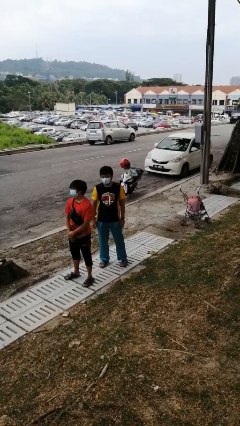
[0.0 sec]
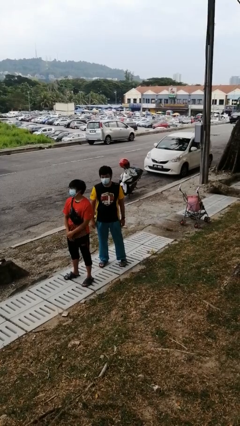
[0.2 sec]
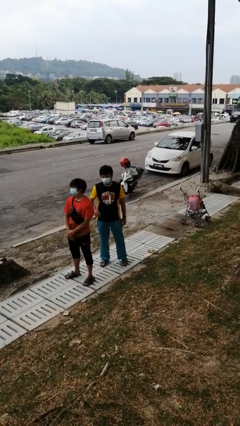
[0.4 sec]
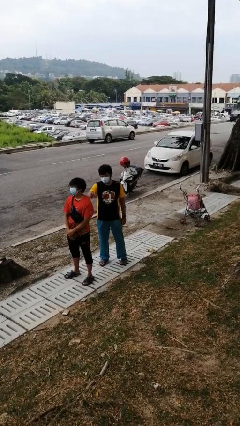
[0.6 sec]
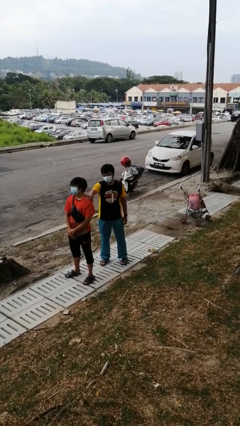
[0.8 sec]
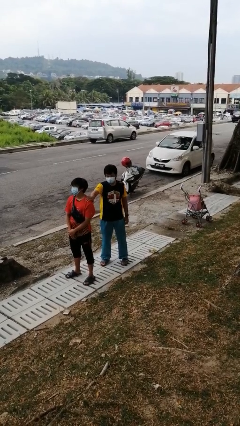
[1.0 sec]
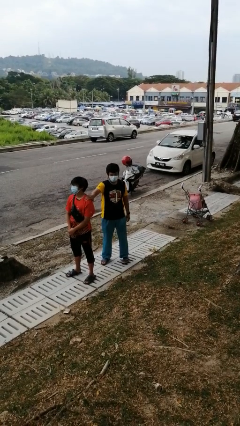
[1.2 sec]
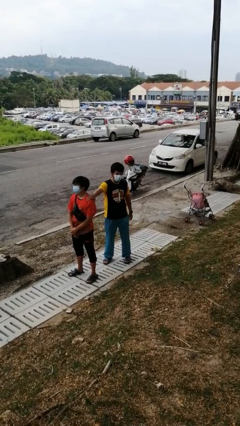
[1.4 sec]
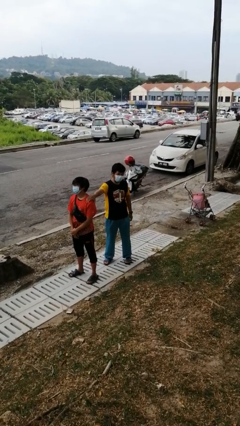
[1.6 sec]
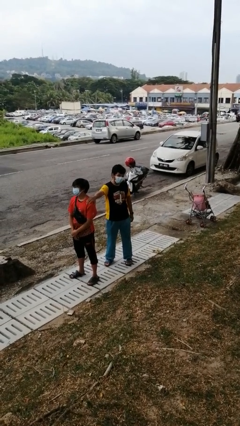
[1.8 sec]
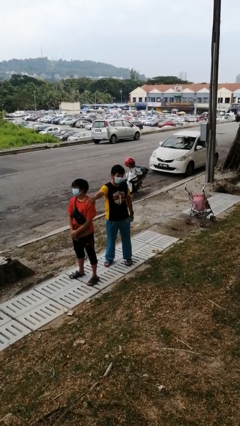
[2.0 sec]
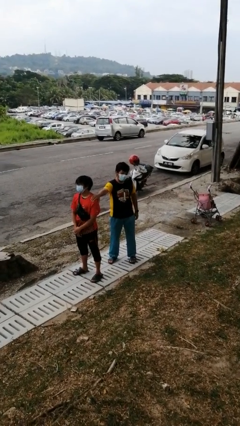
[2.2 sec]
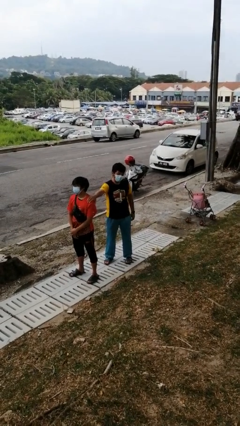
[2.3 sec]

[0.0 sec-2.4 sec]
person grabs person by shoulder

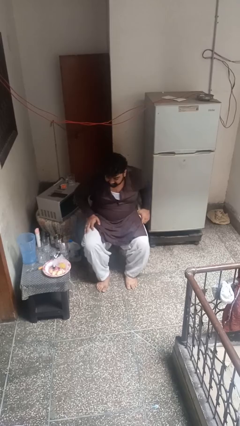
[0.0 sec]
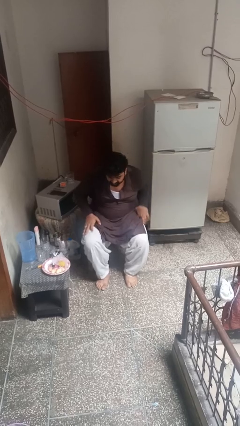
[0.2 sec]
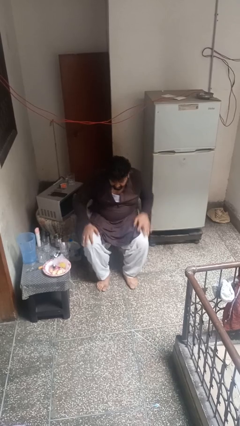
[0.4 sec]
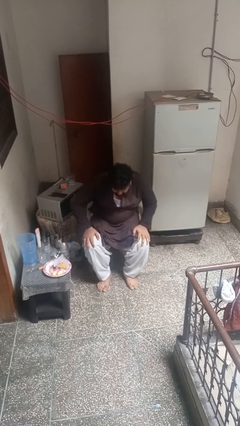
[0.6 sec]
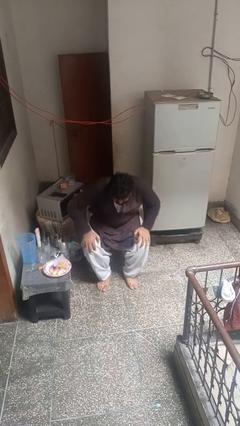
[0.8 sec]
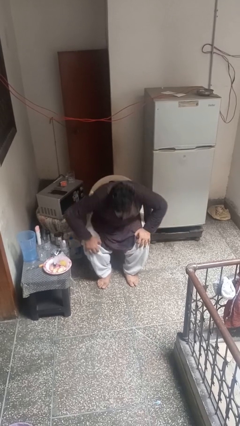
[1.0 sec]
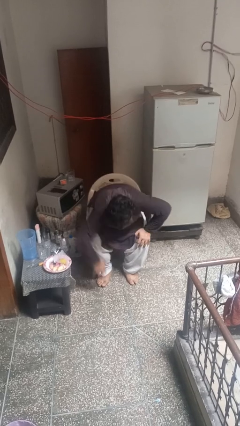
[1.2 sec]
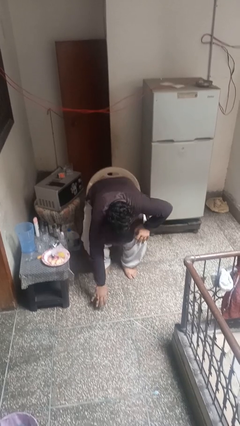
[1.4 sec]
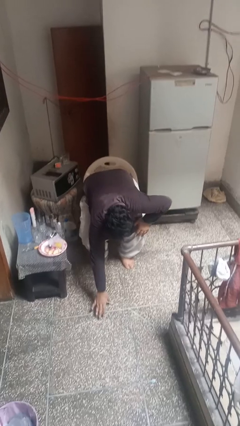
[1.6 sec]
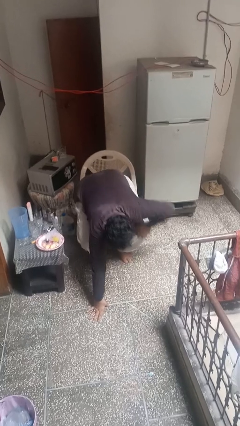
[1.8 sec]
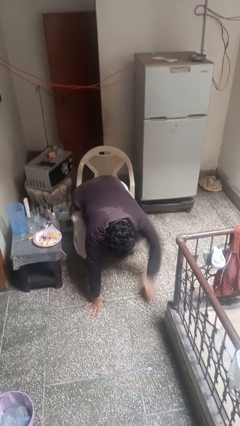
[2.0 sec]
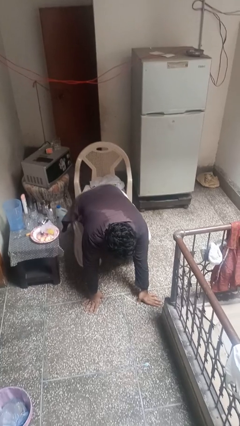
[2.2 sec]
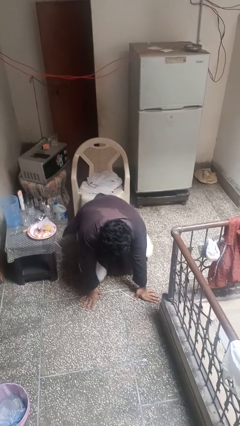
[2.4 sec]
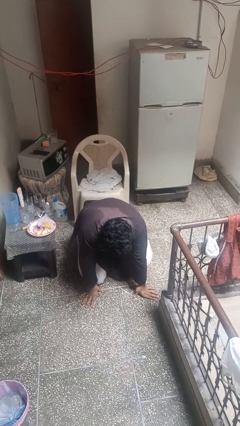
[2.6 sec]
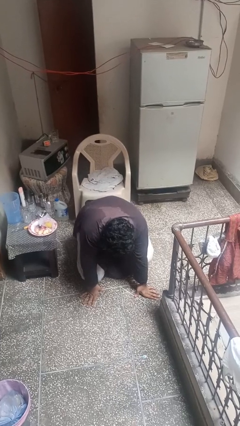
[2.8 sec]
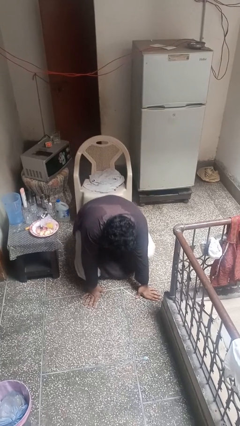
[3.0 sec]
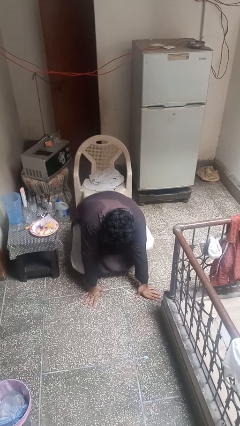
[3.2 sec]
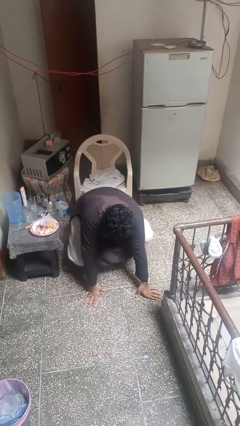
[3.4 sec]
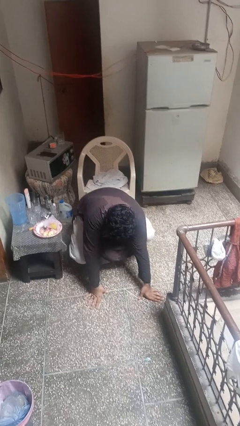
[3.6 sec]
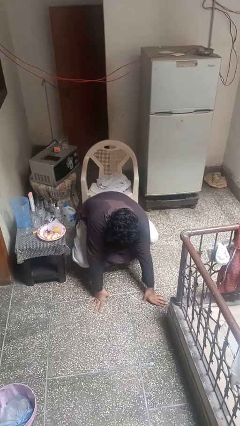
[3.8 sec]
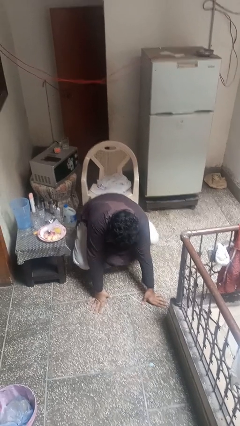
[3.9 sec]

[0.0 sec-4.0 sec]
person falls from chair

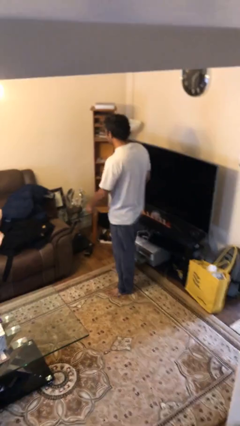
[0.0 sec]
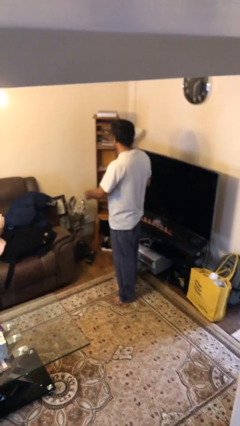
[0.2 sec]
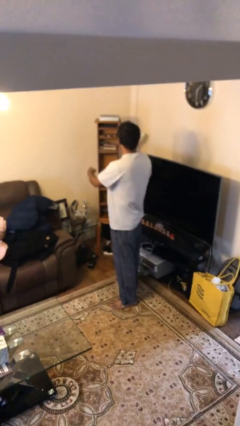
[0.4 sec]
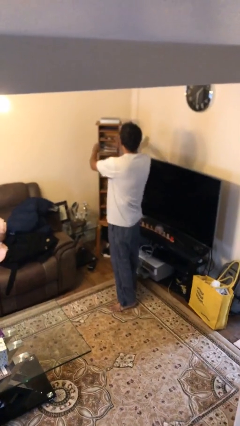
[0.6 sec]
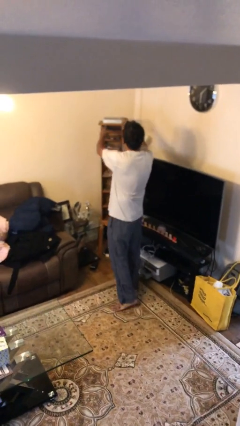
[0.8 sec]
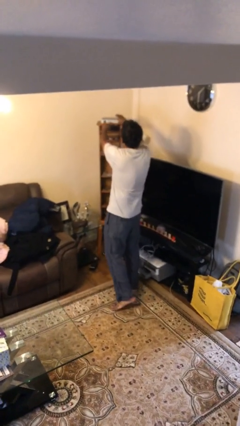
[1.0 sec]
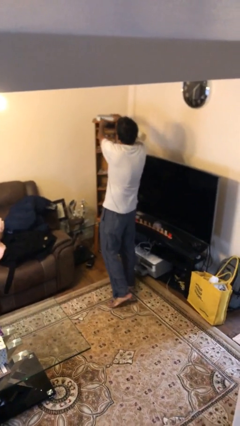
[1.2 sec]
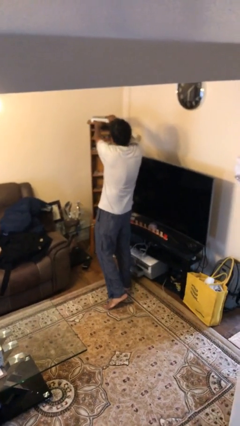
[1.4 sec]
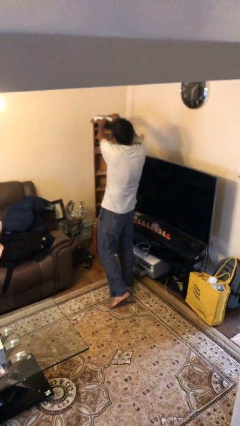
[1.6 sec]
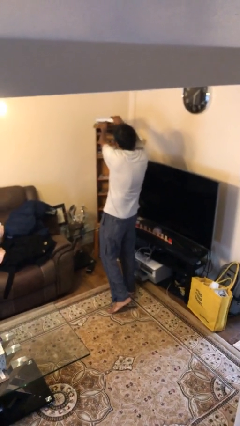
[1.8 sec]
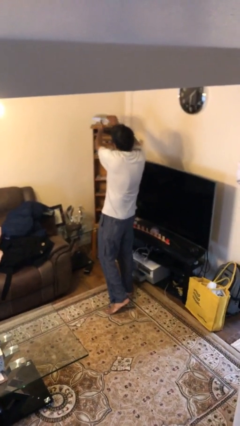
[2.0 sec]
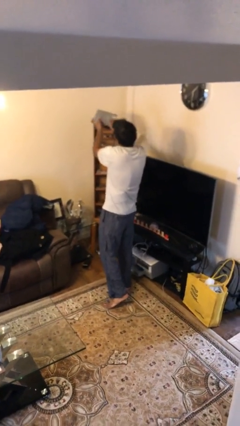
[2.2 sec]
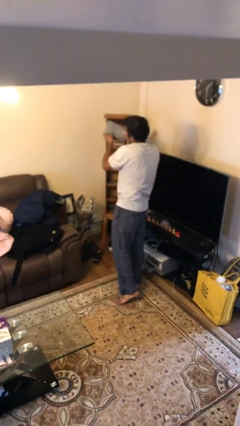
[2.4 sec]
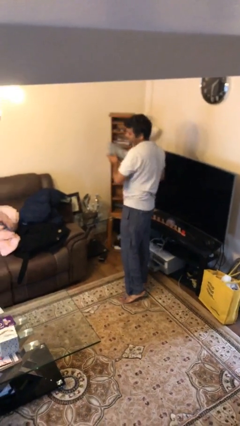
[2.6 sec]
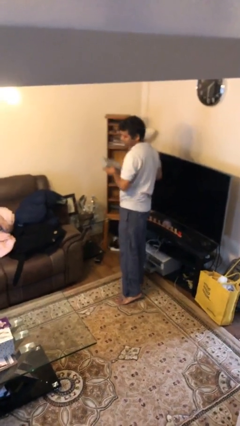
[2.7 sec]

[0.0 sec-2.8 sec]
person picks up object from shelf

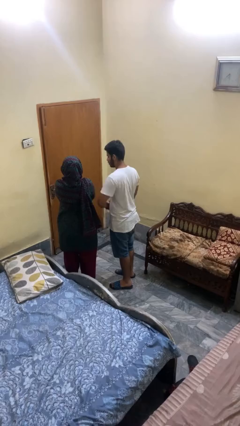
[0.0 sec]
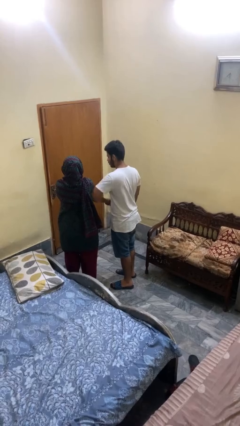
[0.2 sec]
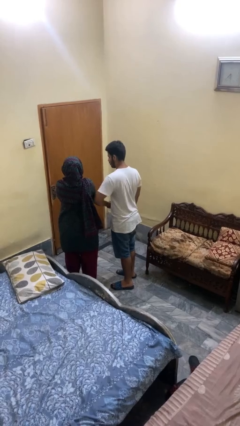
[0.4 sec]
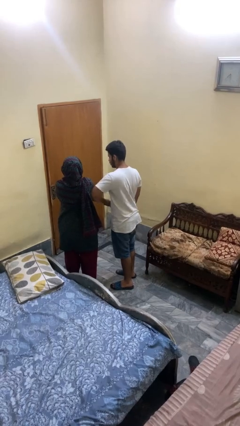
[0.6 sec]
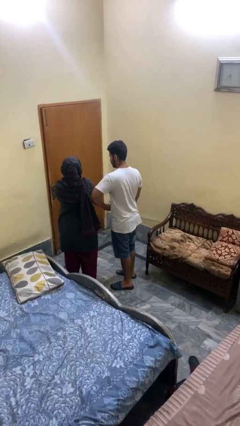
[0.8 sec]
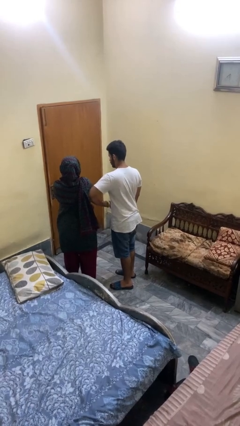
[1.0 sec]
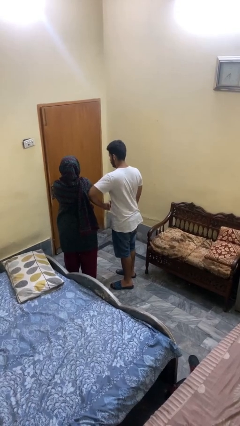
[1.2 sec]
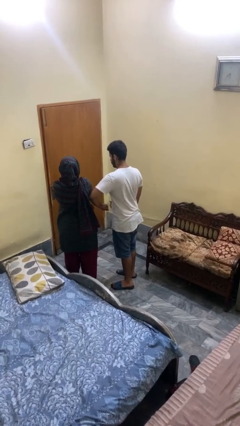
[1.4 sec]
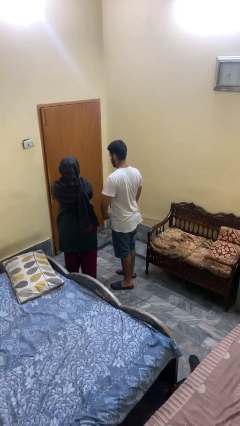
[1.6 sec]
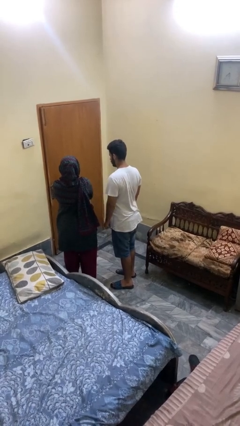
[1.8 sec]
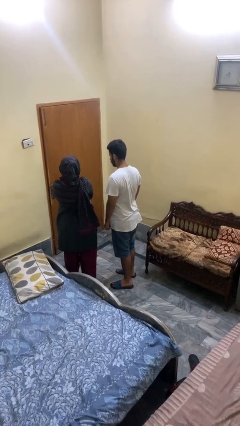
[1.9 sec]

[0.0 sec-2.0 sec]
person nudges person with elbow

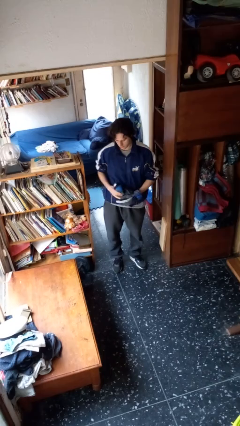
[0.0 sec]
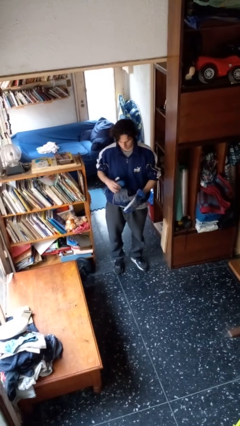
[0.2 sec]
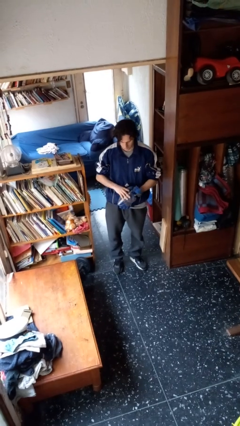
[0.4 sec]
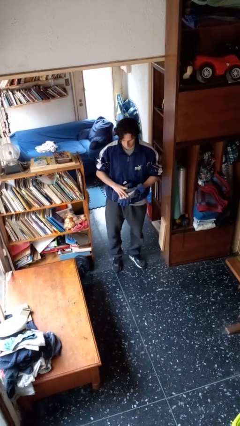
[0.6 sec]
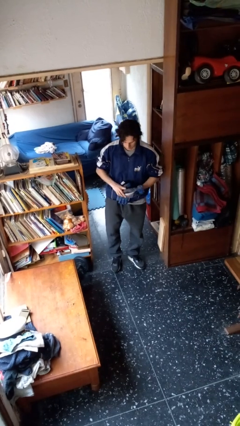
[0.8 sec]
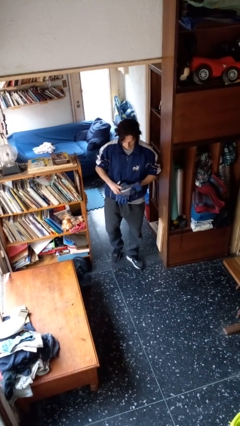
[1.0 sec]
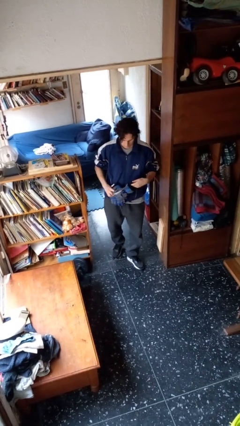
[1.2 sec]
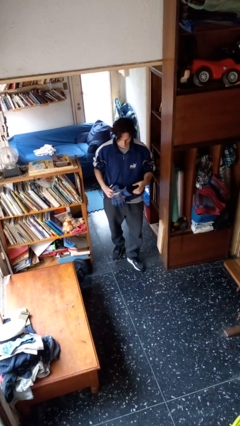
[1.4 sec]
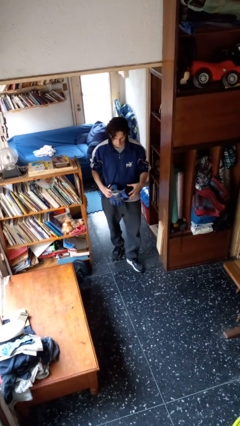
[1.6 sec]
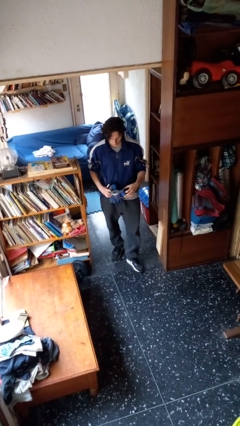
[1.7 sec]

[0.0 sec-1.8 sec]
person takes off gloves

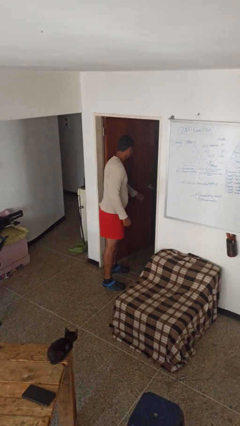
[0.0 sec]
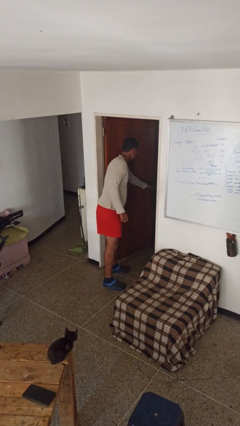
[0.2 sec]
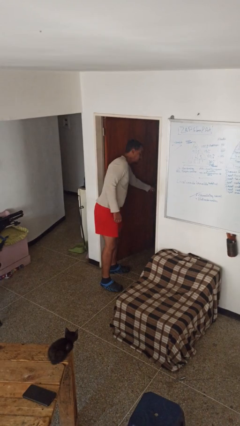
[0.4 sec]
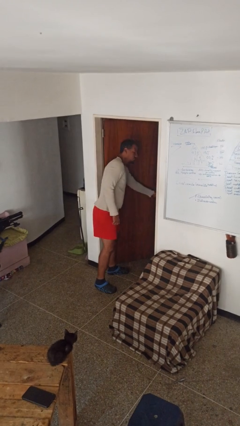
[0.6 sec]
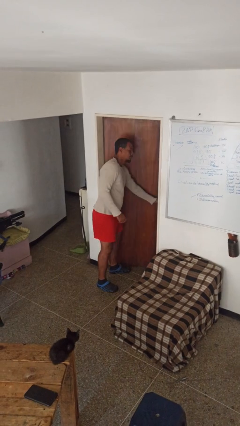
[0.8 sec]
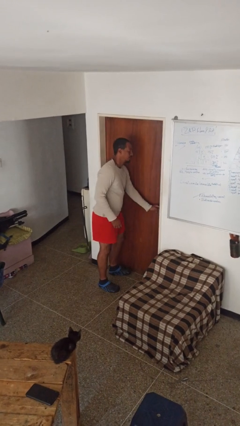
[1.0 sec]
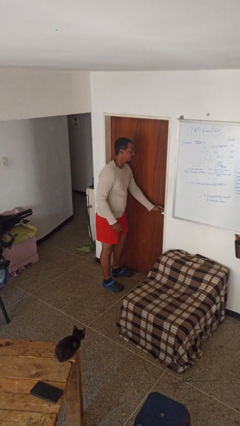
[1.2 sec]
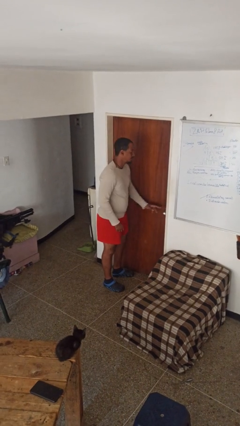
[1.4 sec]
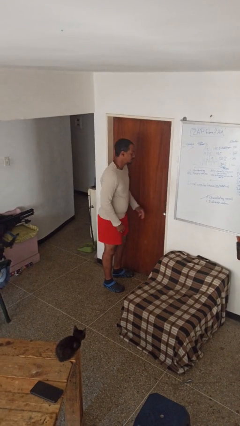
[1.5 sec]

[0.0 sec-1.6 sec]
person closes facility door

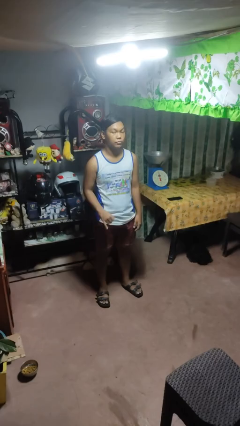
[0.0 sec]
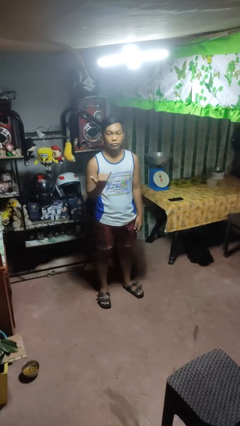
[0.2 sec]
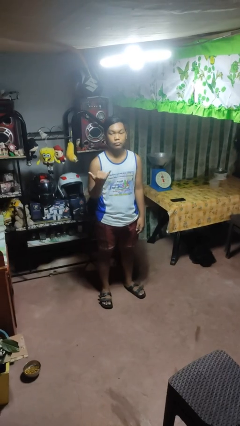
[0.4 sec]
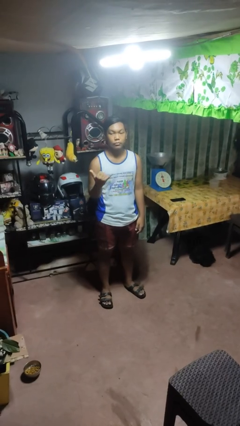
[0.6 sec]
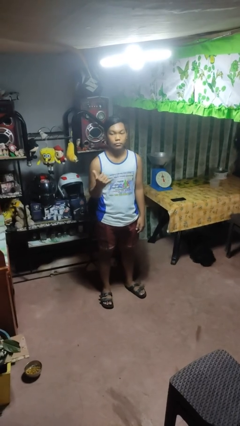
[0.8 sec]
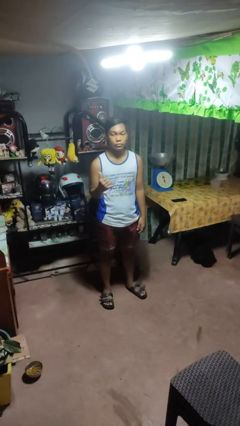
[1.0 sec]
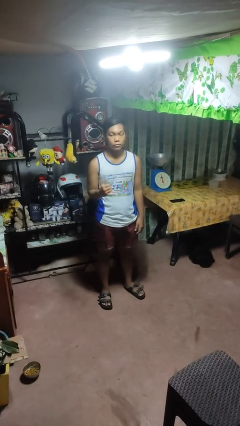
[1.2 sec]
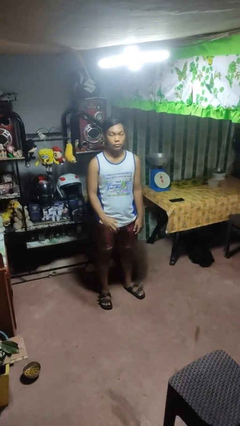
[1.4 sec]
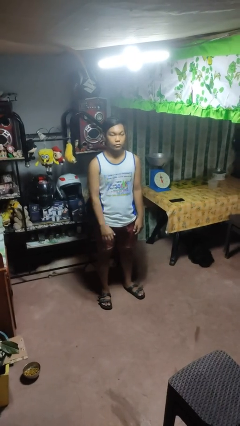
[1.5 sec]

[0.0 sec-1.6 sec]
person gestures hang loose

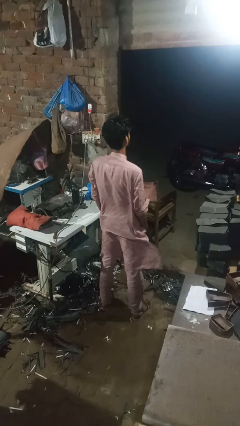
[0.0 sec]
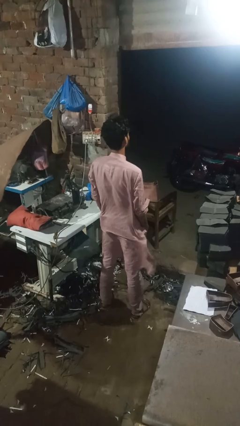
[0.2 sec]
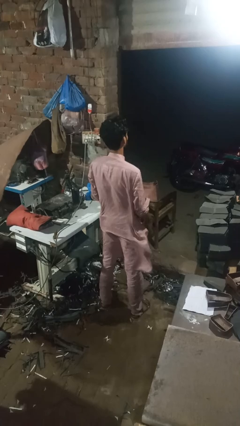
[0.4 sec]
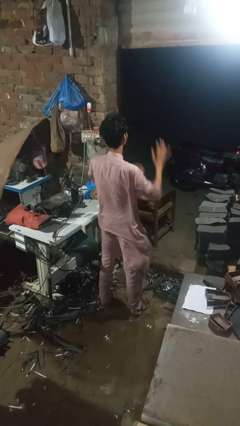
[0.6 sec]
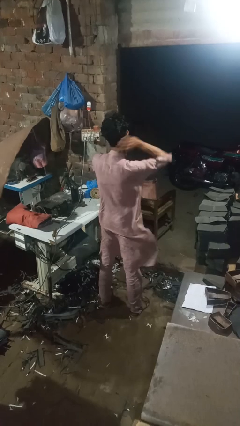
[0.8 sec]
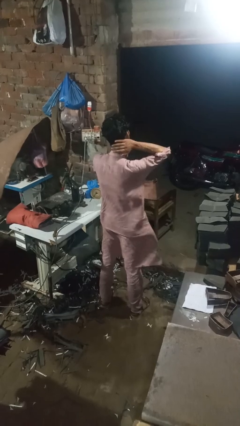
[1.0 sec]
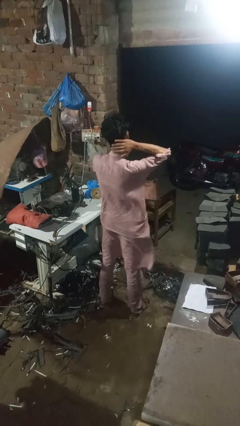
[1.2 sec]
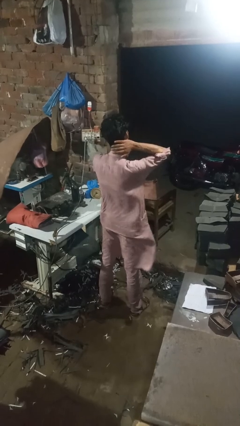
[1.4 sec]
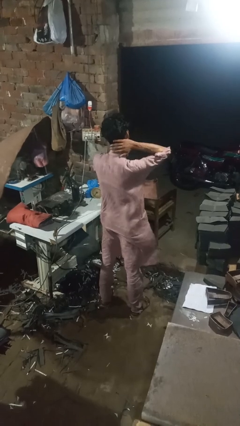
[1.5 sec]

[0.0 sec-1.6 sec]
person rubs neck
